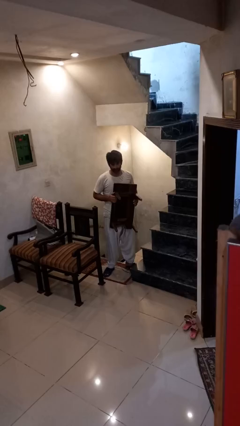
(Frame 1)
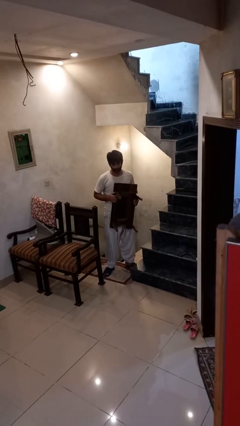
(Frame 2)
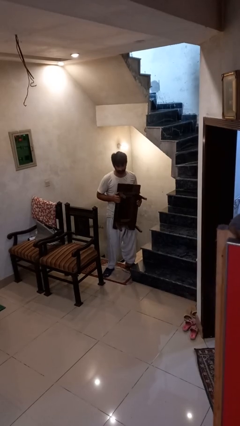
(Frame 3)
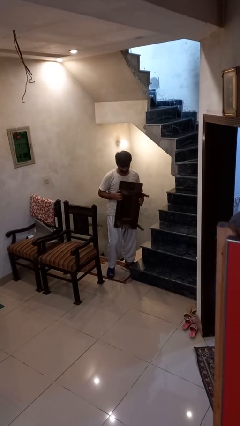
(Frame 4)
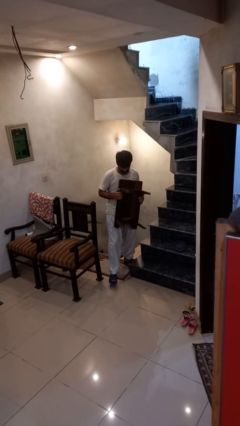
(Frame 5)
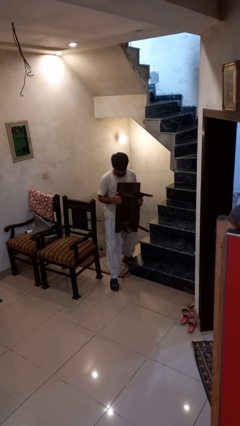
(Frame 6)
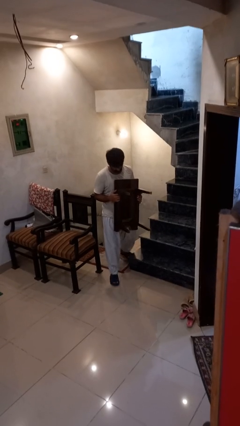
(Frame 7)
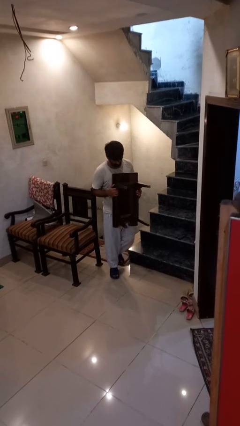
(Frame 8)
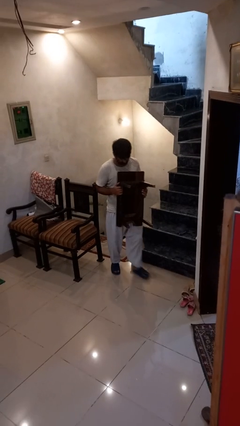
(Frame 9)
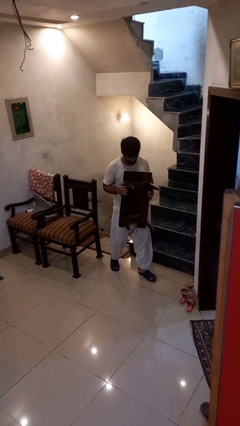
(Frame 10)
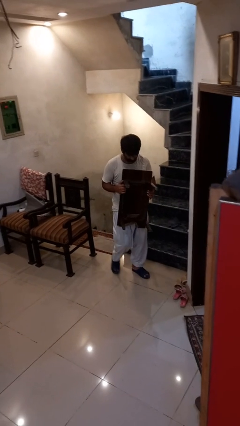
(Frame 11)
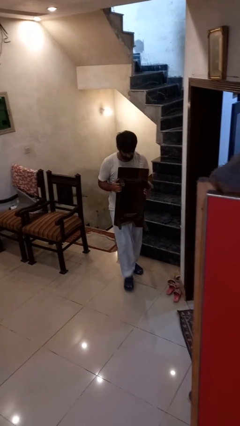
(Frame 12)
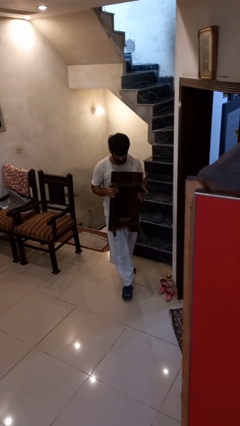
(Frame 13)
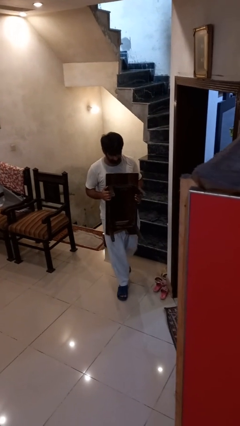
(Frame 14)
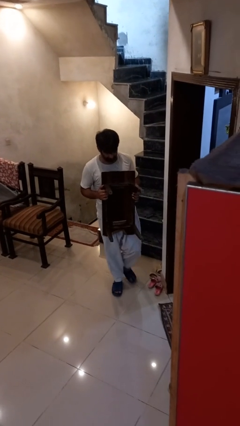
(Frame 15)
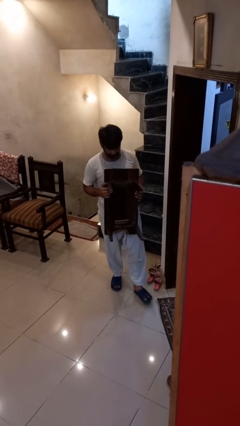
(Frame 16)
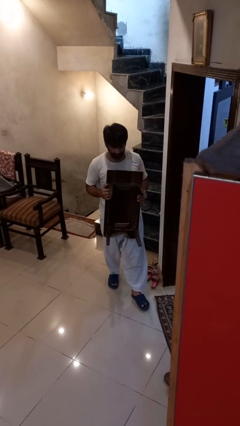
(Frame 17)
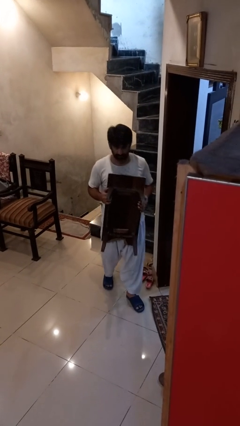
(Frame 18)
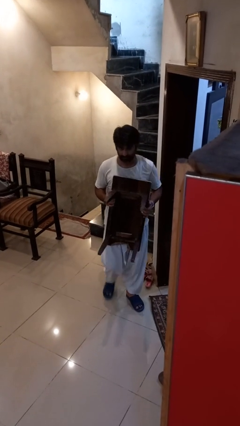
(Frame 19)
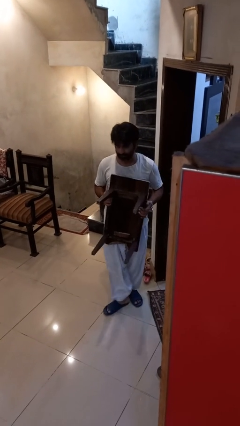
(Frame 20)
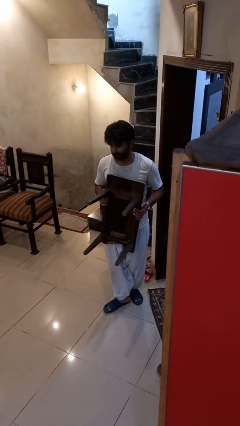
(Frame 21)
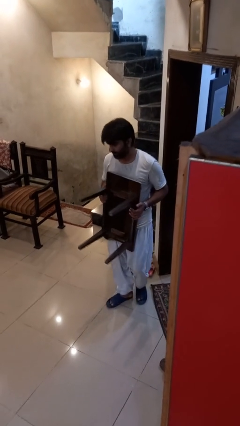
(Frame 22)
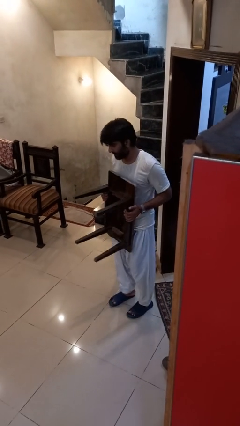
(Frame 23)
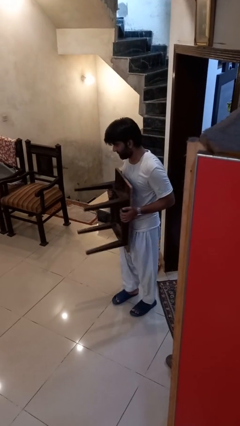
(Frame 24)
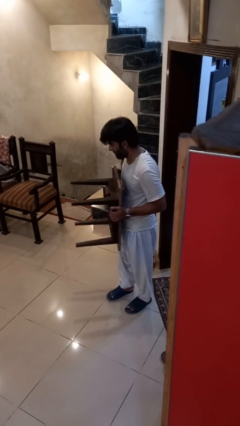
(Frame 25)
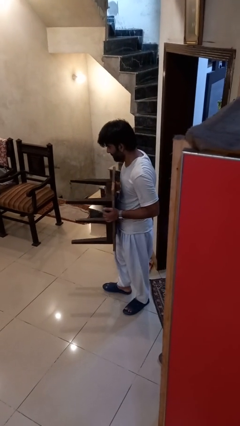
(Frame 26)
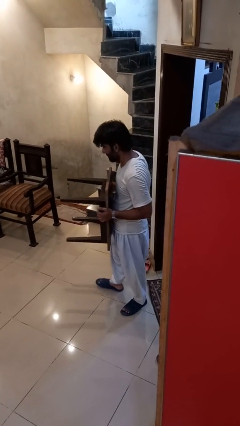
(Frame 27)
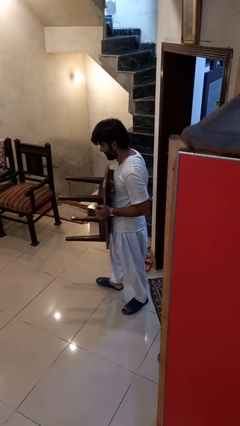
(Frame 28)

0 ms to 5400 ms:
person carries furniture

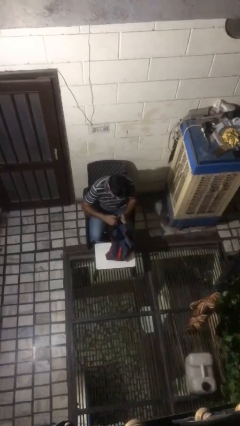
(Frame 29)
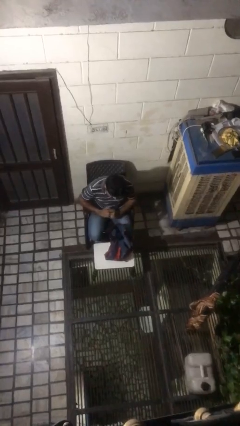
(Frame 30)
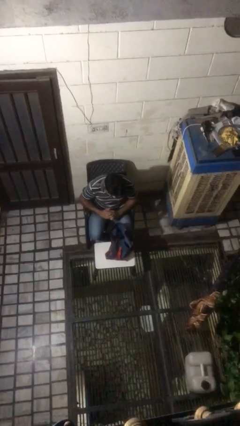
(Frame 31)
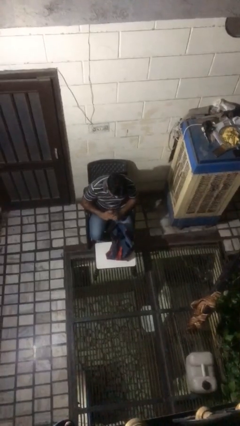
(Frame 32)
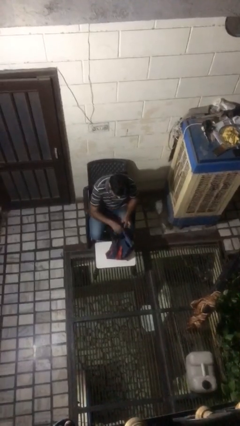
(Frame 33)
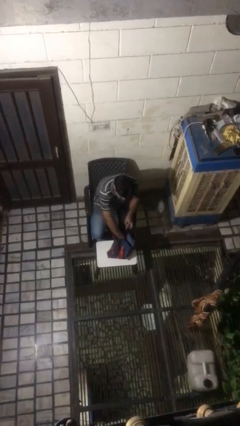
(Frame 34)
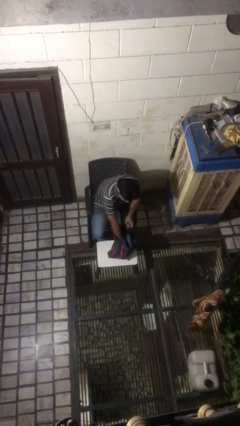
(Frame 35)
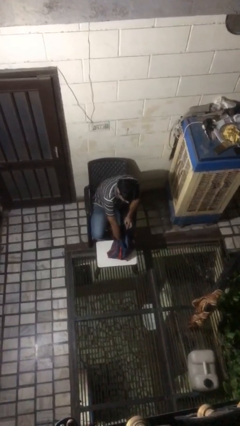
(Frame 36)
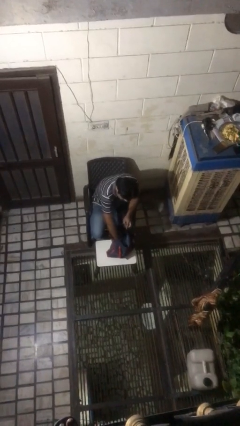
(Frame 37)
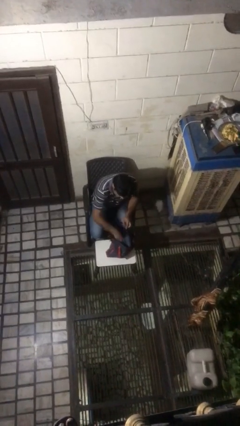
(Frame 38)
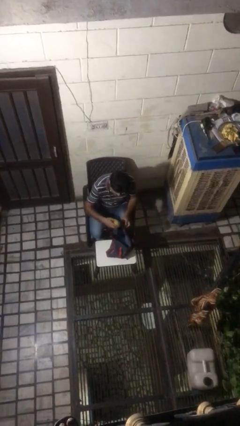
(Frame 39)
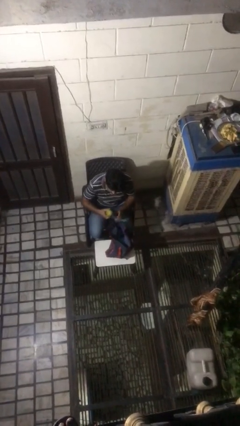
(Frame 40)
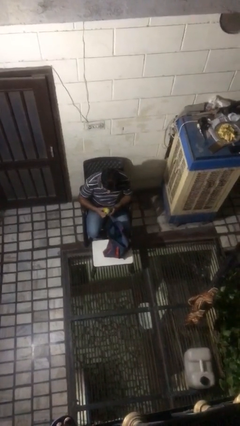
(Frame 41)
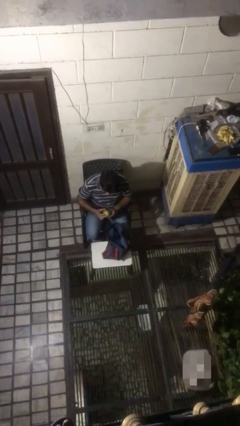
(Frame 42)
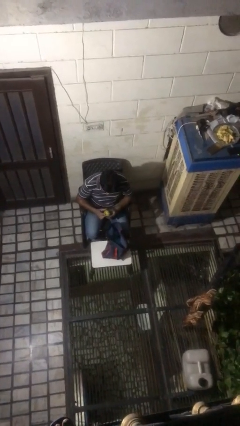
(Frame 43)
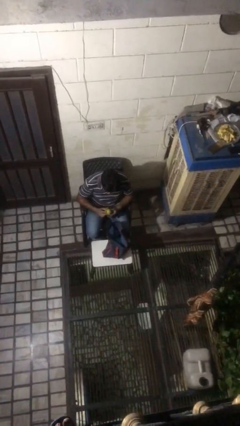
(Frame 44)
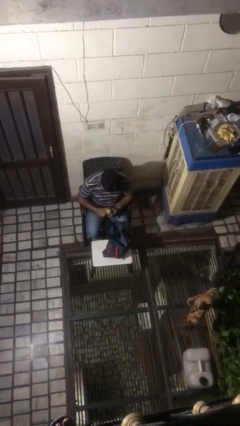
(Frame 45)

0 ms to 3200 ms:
person takes object from bag

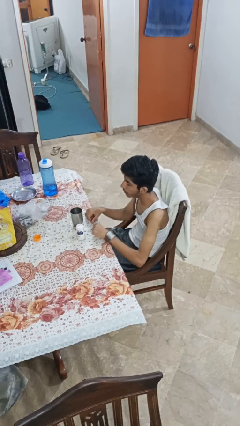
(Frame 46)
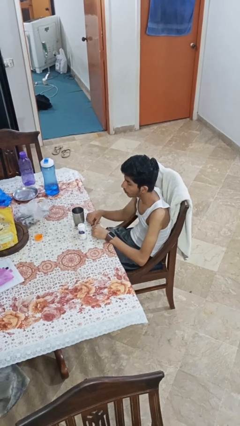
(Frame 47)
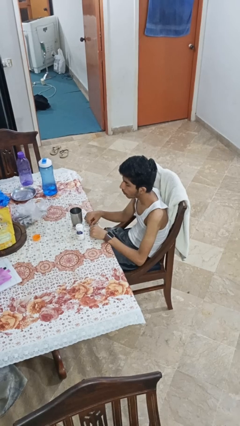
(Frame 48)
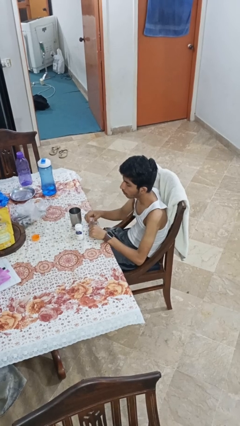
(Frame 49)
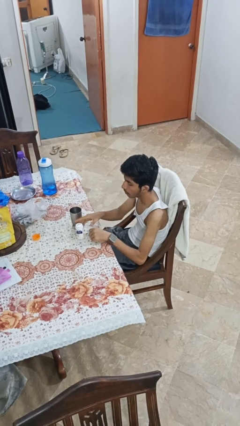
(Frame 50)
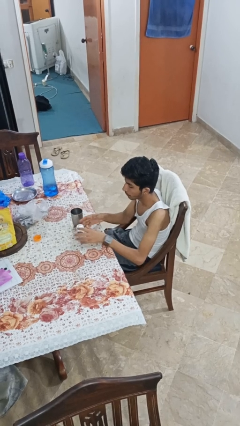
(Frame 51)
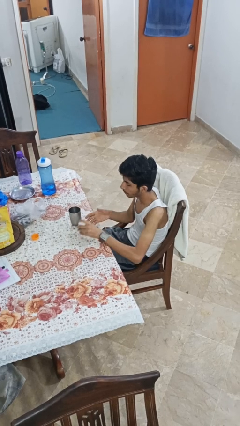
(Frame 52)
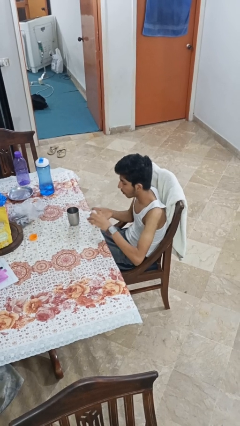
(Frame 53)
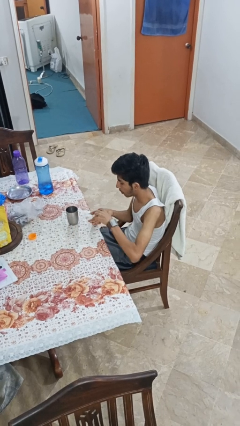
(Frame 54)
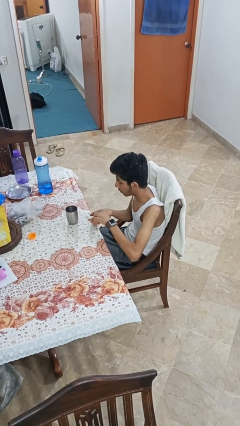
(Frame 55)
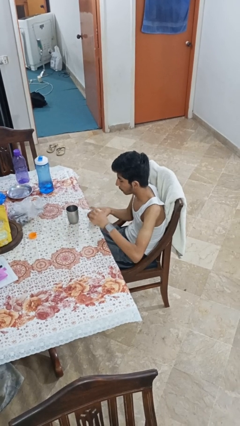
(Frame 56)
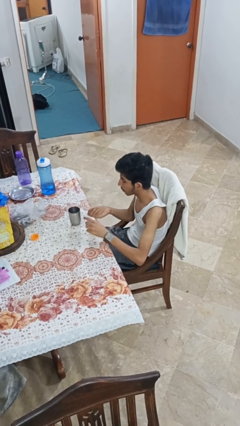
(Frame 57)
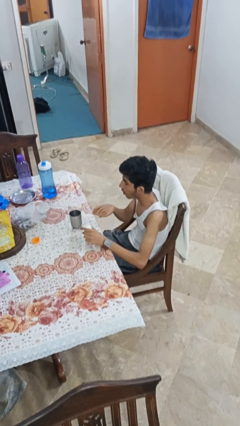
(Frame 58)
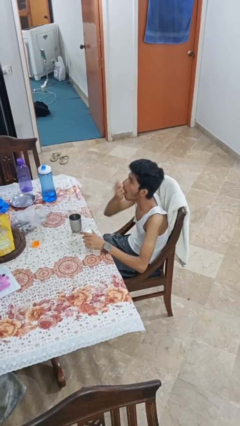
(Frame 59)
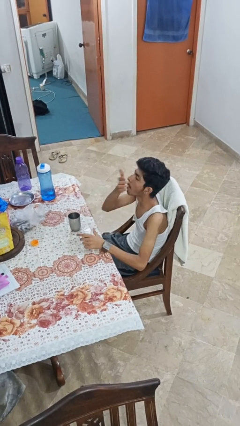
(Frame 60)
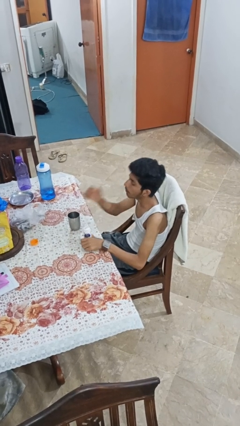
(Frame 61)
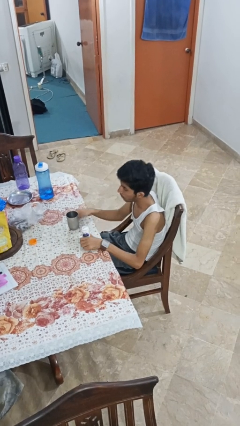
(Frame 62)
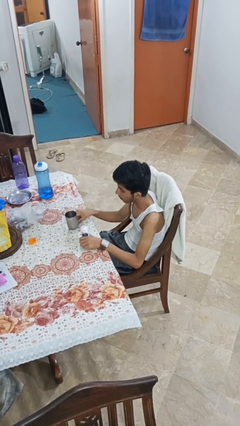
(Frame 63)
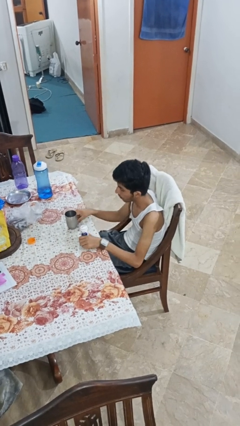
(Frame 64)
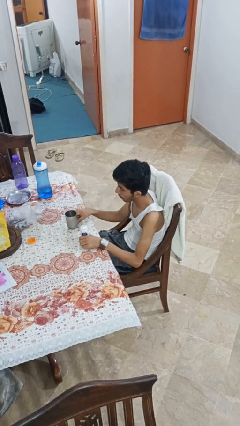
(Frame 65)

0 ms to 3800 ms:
person takes medicine pills

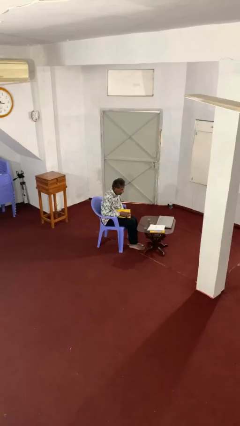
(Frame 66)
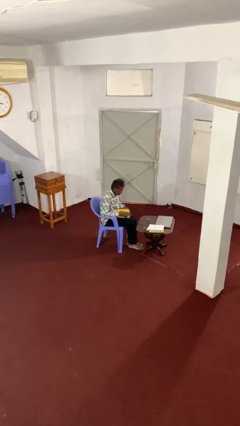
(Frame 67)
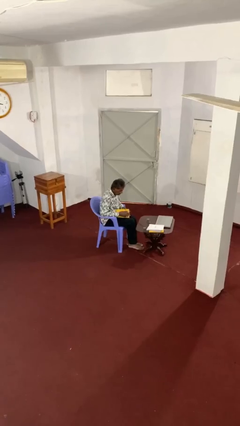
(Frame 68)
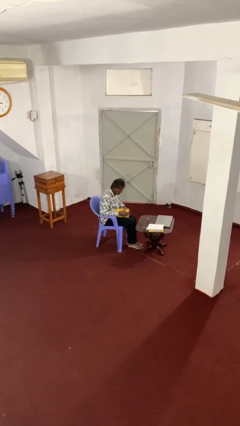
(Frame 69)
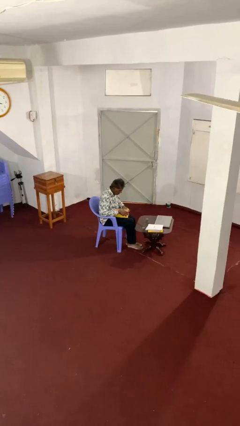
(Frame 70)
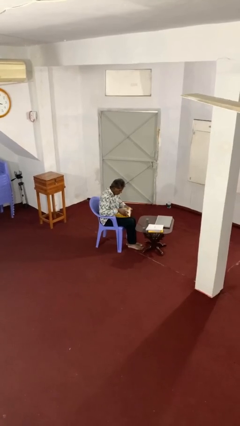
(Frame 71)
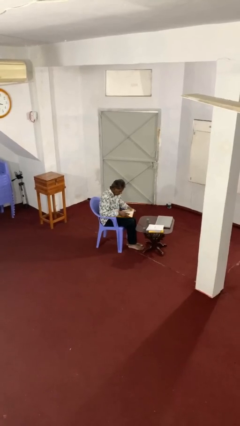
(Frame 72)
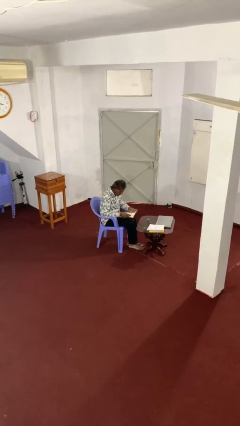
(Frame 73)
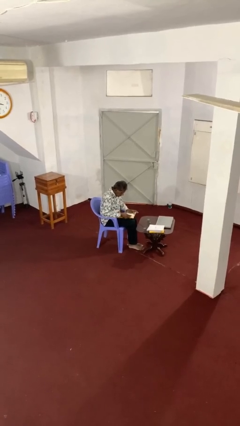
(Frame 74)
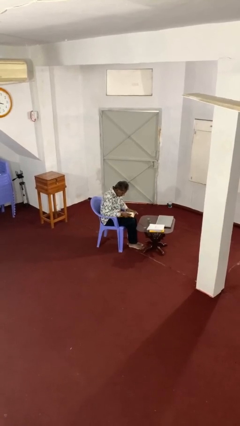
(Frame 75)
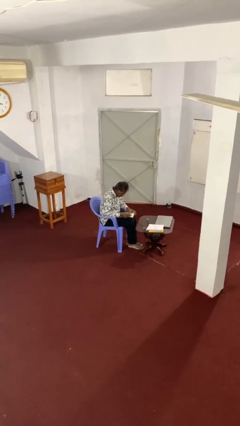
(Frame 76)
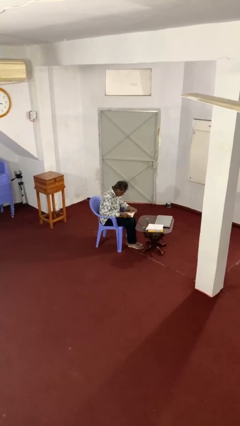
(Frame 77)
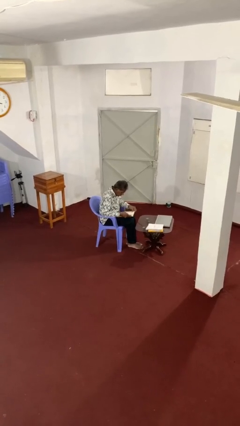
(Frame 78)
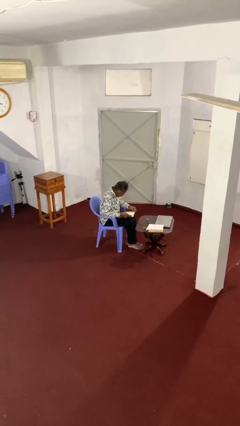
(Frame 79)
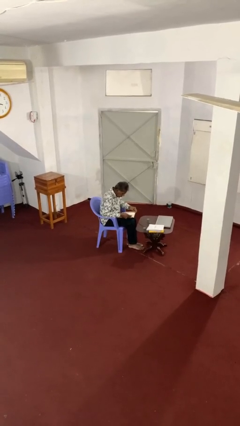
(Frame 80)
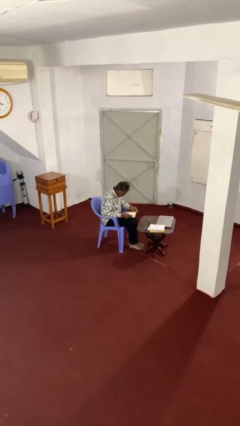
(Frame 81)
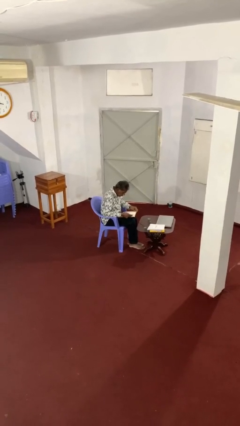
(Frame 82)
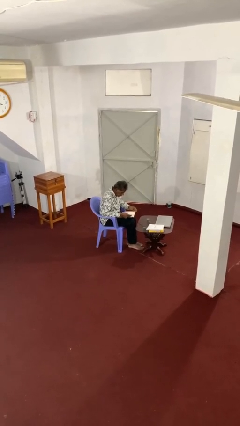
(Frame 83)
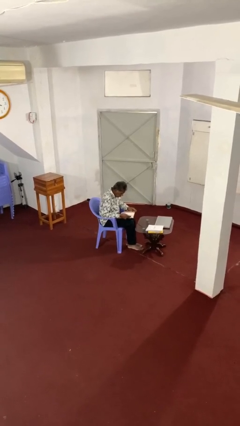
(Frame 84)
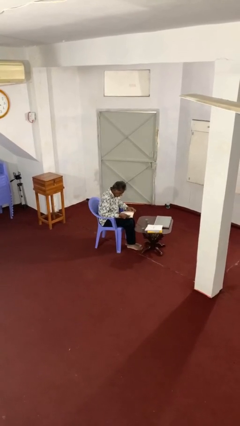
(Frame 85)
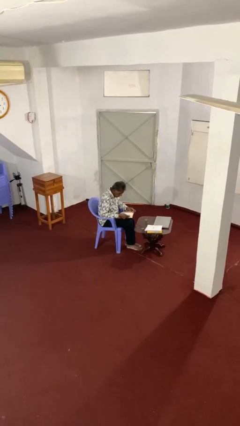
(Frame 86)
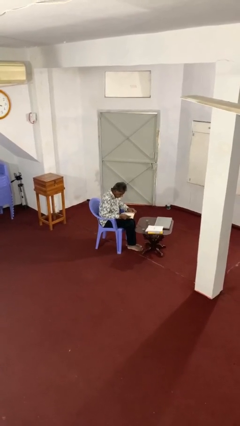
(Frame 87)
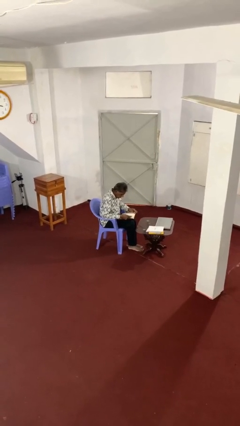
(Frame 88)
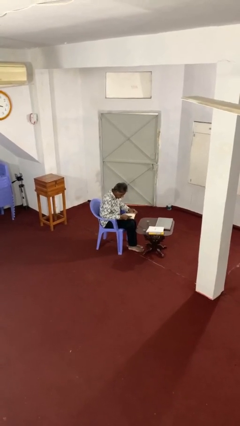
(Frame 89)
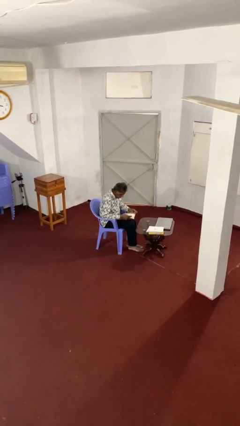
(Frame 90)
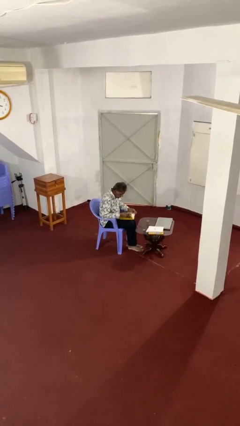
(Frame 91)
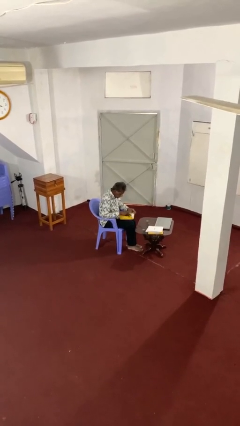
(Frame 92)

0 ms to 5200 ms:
person reads document

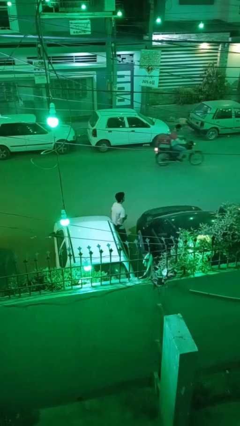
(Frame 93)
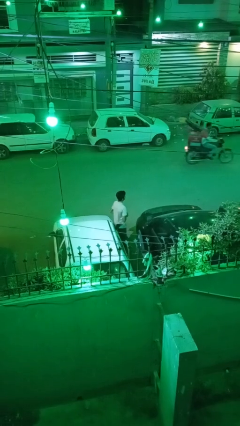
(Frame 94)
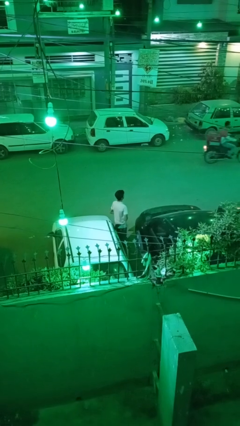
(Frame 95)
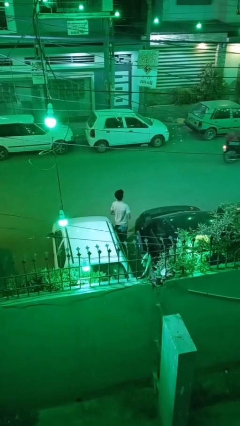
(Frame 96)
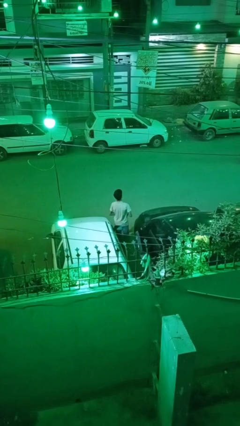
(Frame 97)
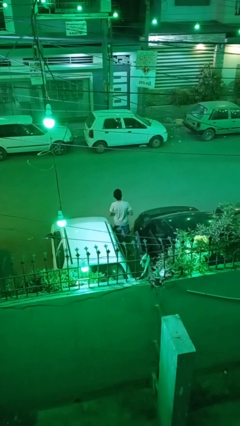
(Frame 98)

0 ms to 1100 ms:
person leans against car
